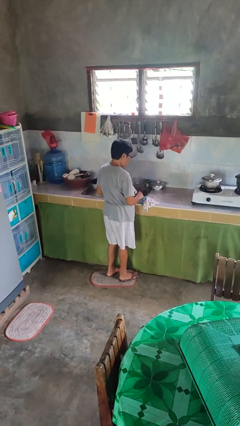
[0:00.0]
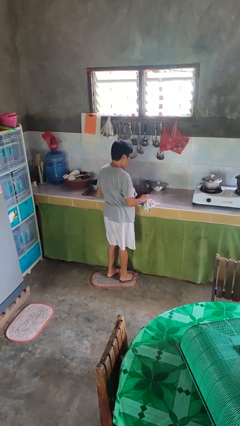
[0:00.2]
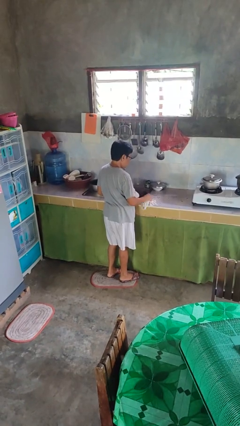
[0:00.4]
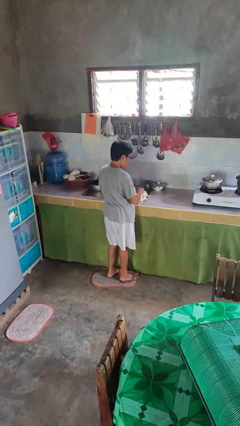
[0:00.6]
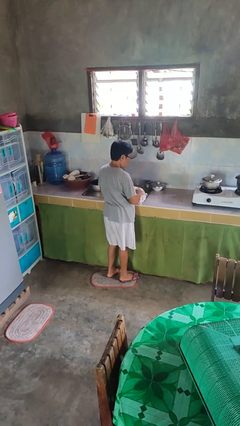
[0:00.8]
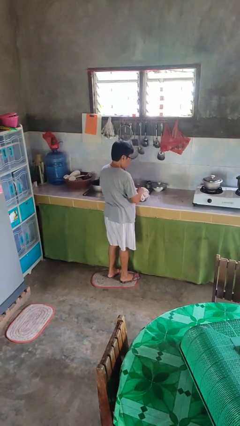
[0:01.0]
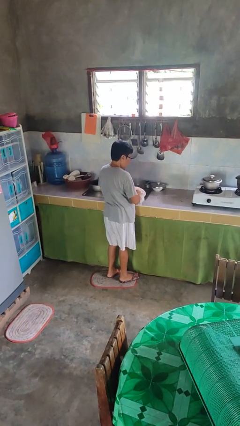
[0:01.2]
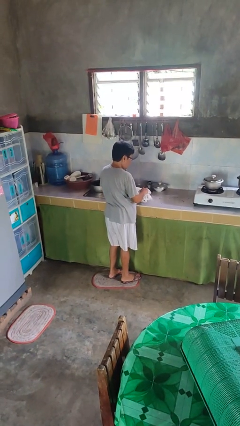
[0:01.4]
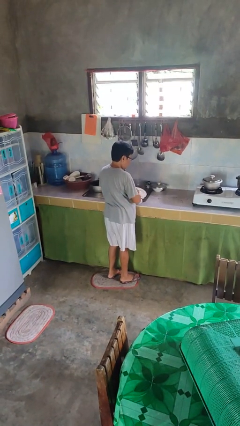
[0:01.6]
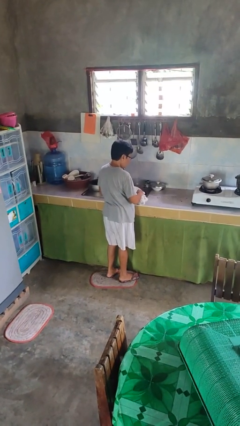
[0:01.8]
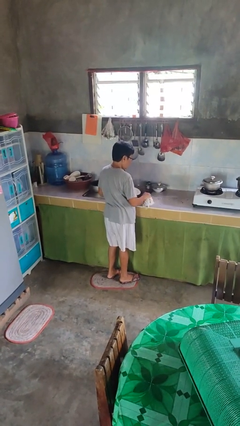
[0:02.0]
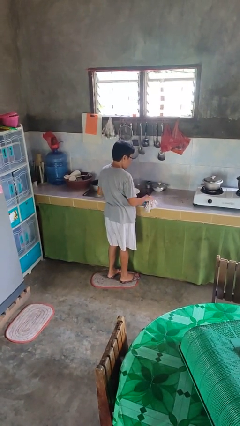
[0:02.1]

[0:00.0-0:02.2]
person dries dish

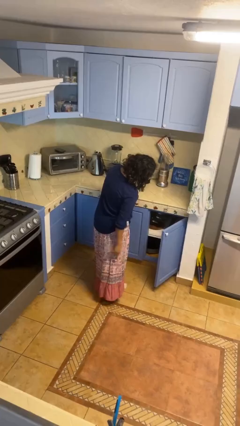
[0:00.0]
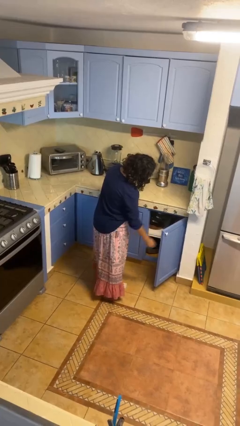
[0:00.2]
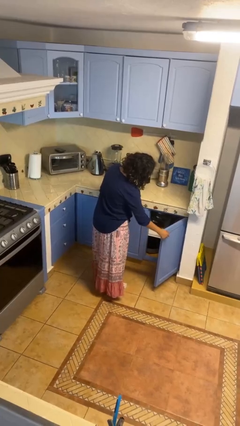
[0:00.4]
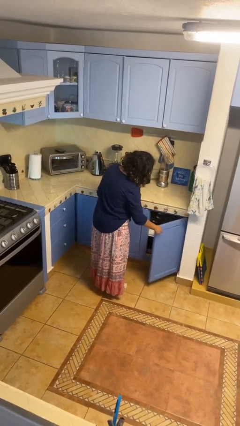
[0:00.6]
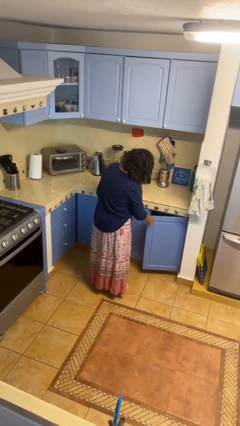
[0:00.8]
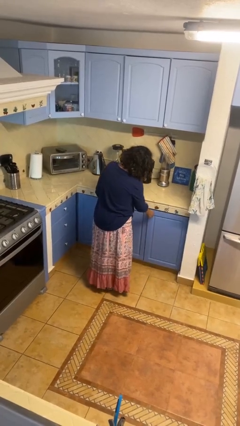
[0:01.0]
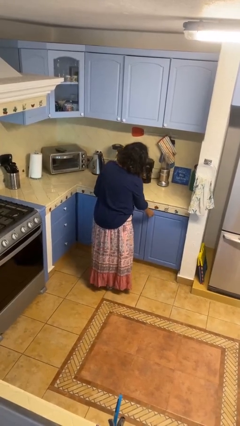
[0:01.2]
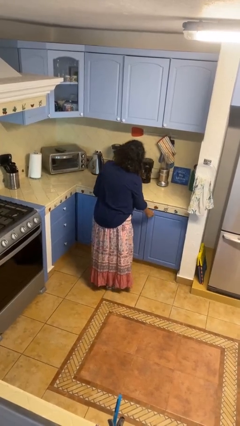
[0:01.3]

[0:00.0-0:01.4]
person closes cabinet

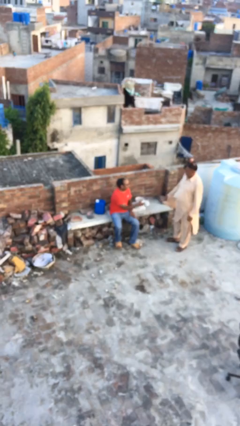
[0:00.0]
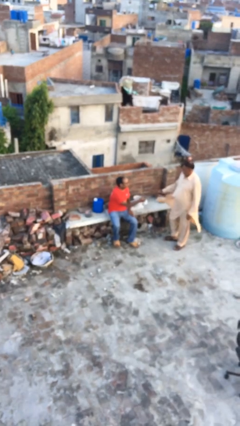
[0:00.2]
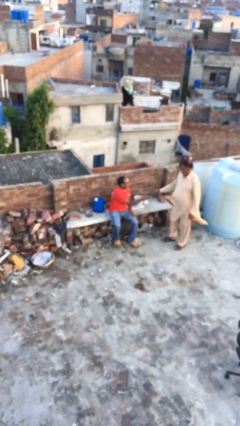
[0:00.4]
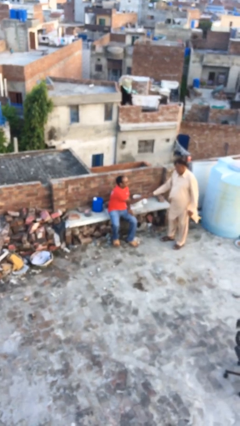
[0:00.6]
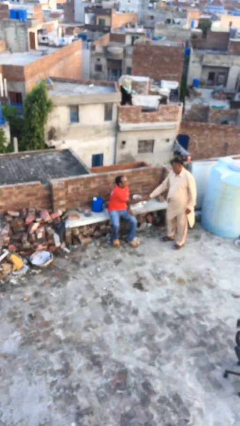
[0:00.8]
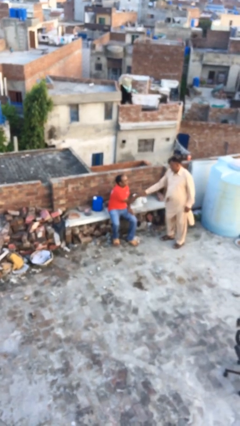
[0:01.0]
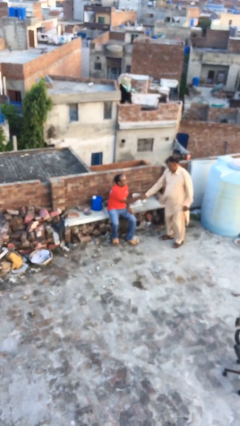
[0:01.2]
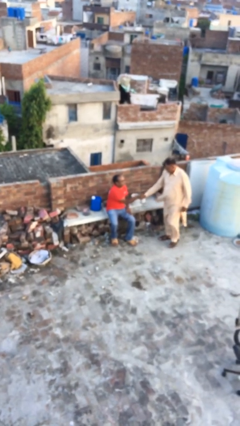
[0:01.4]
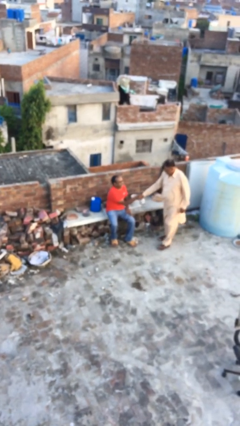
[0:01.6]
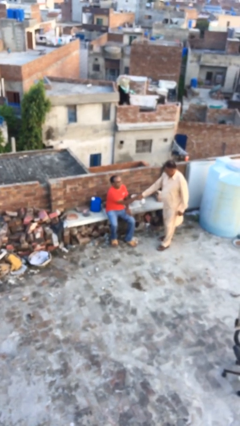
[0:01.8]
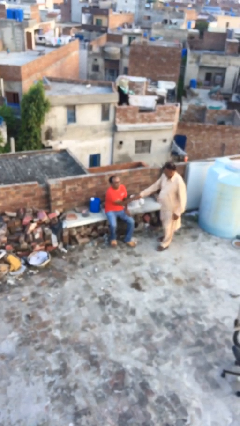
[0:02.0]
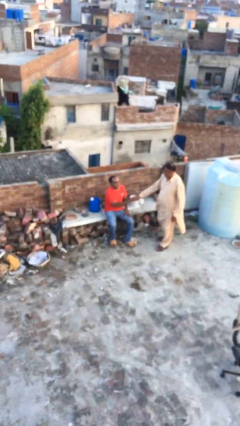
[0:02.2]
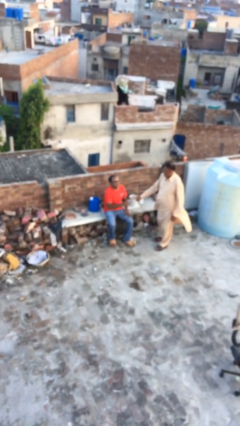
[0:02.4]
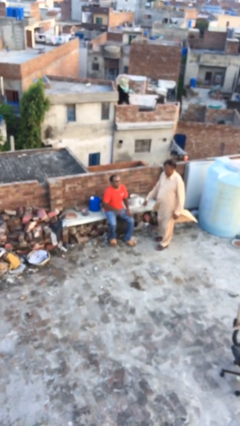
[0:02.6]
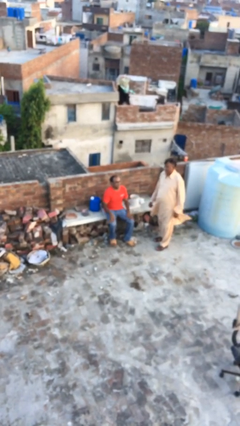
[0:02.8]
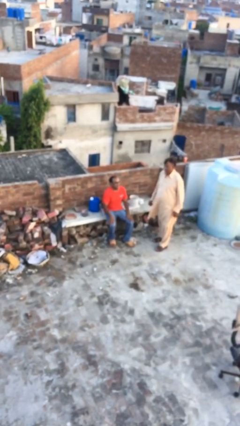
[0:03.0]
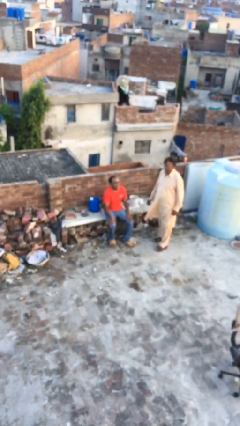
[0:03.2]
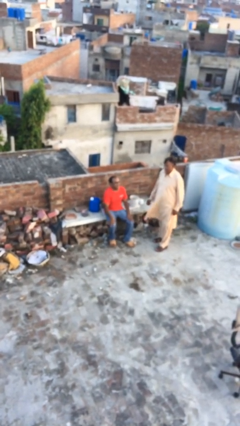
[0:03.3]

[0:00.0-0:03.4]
person shakes hand

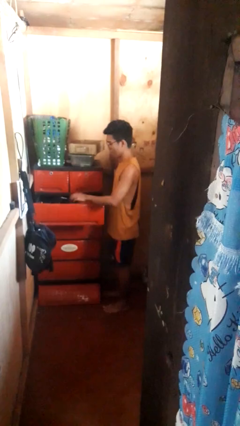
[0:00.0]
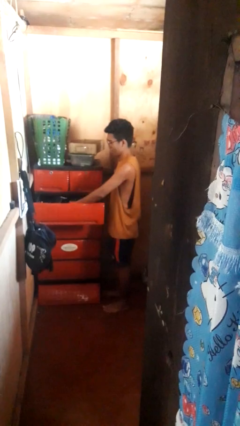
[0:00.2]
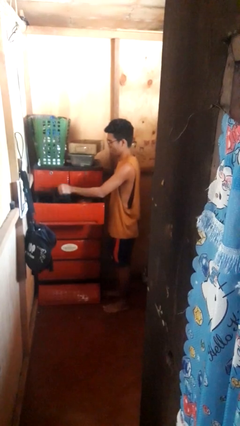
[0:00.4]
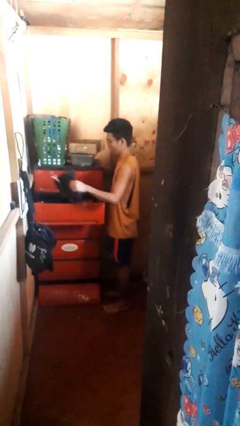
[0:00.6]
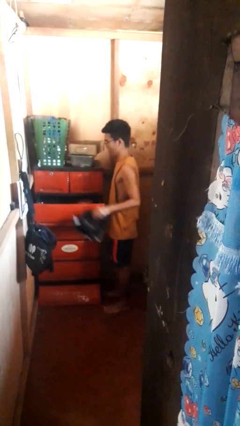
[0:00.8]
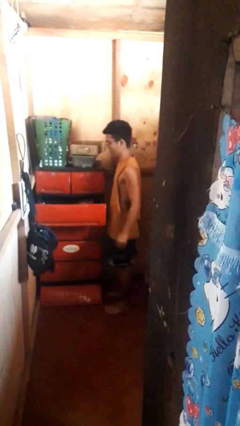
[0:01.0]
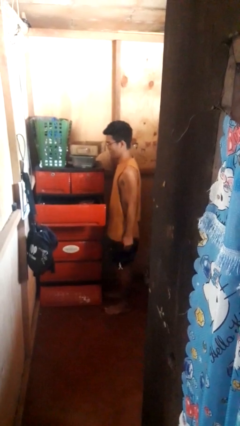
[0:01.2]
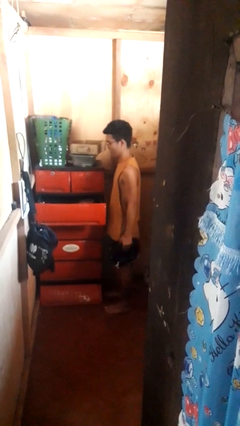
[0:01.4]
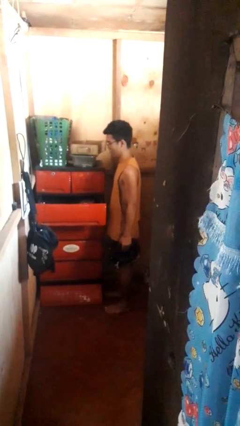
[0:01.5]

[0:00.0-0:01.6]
person takes clothes from dresser

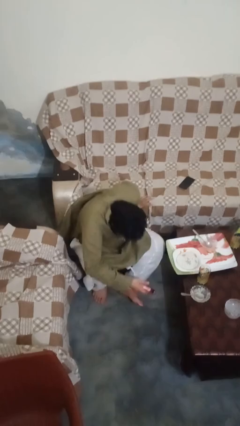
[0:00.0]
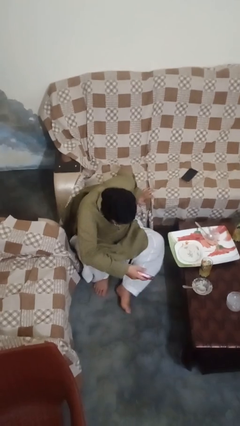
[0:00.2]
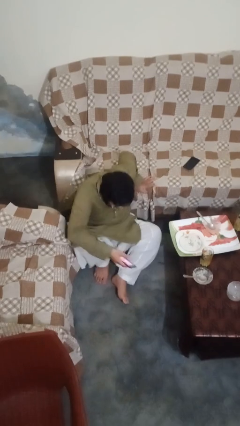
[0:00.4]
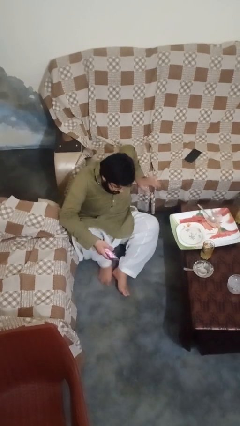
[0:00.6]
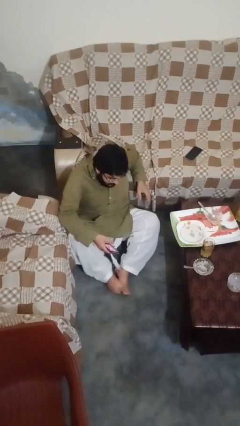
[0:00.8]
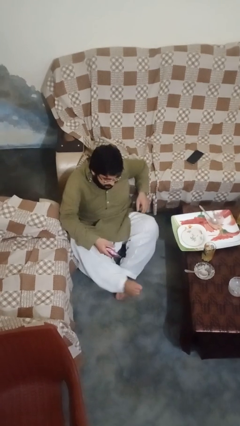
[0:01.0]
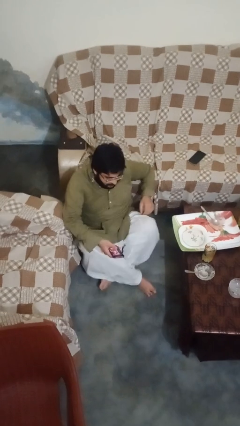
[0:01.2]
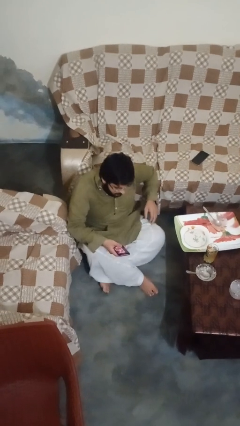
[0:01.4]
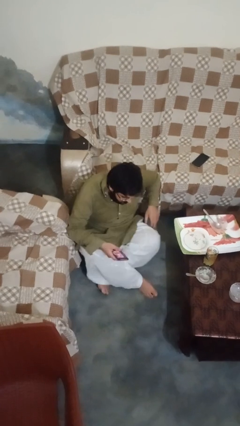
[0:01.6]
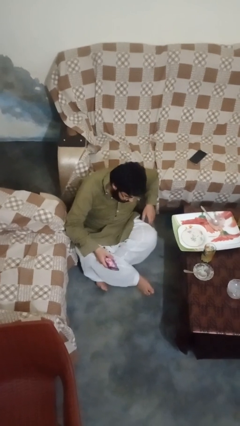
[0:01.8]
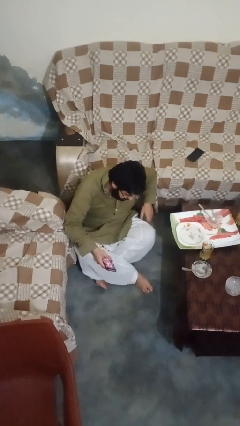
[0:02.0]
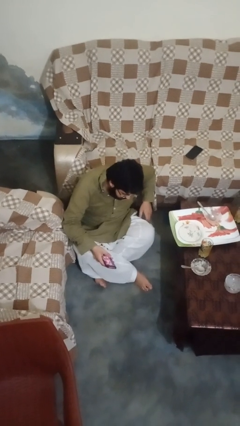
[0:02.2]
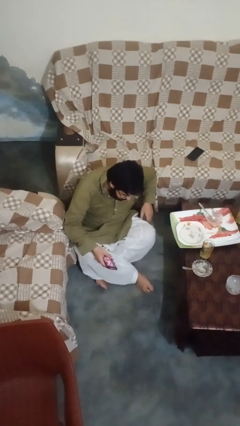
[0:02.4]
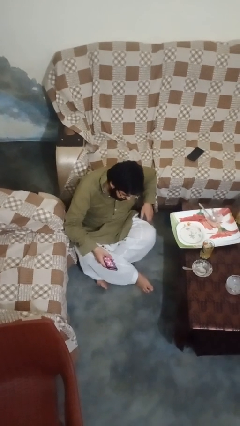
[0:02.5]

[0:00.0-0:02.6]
person sits crisscross

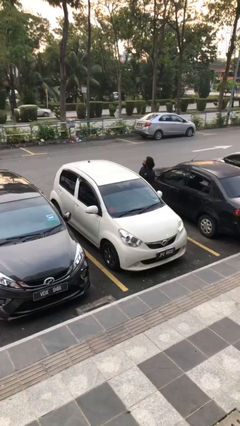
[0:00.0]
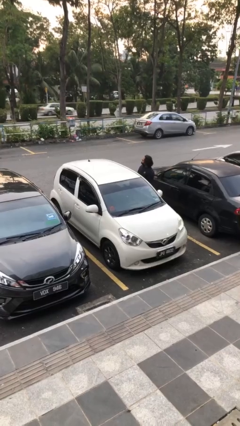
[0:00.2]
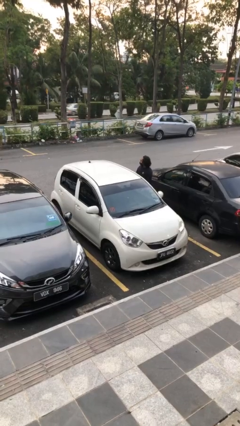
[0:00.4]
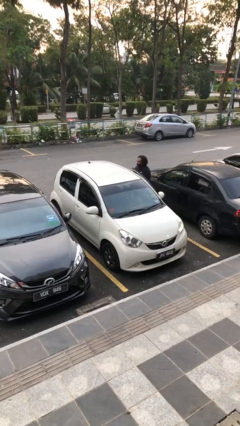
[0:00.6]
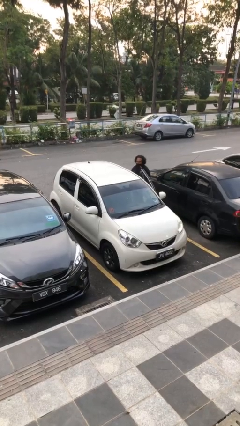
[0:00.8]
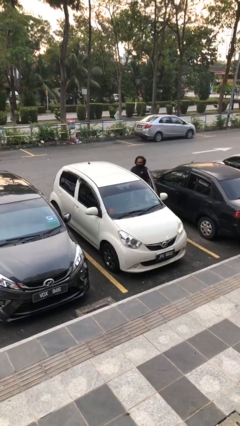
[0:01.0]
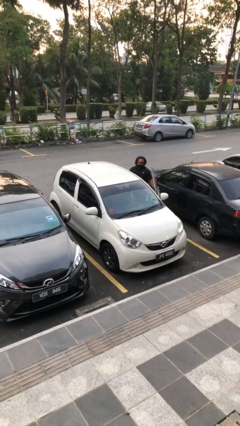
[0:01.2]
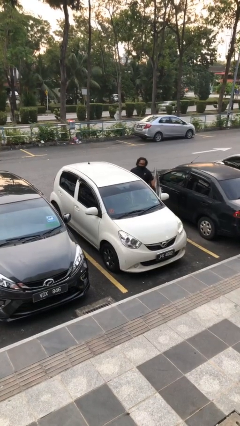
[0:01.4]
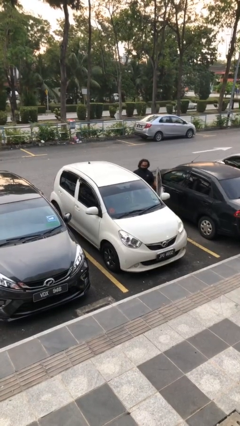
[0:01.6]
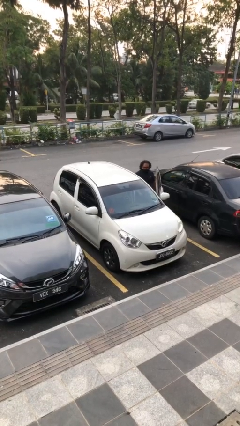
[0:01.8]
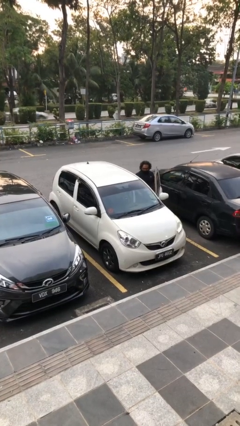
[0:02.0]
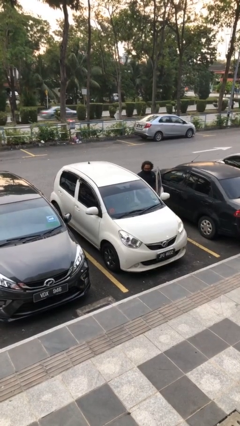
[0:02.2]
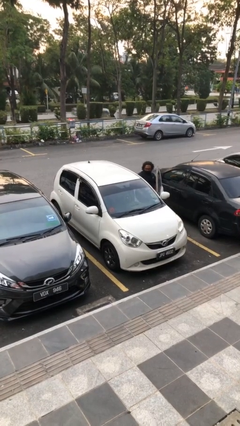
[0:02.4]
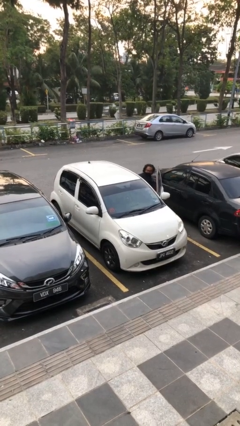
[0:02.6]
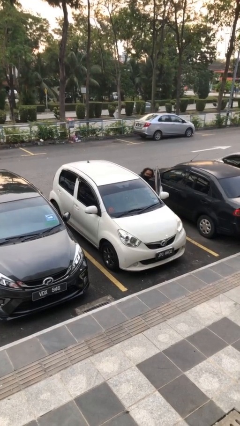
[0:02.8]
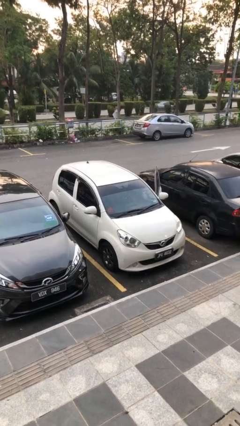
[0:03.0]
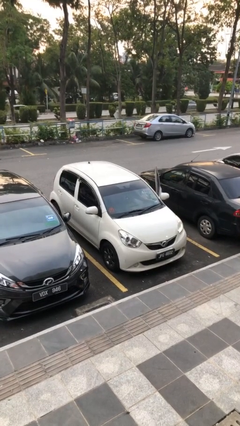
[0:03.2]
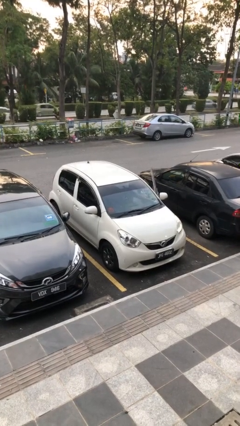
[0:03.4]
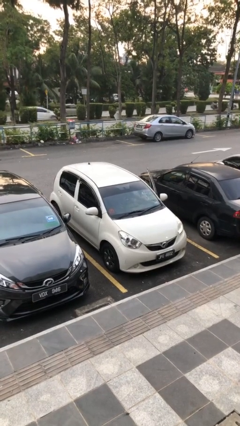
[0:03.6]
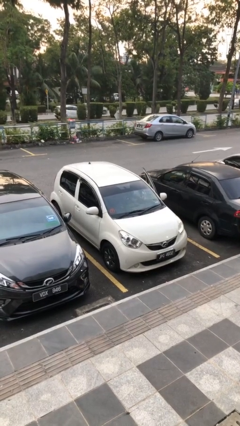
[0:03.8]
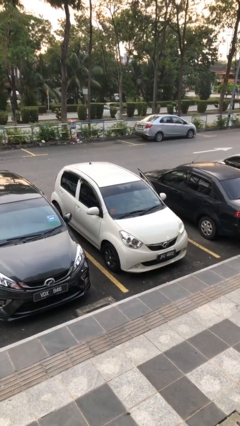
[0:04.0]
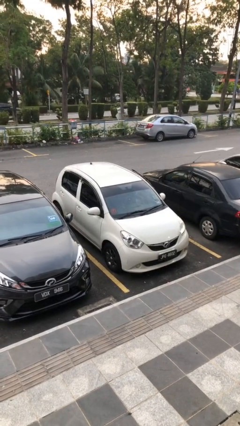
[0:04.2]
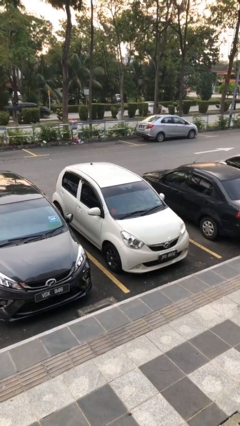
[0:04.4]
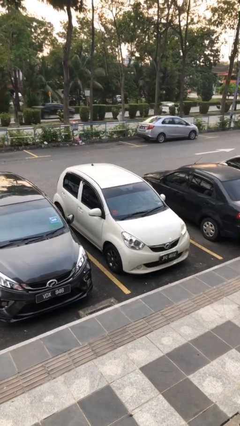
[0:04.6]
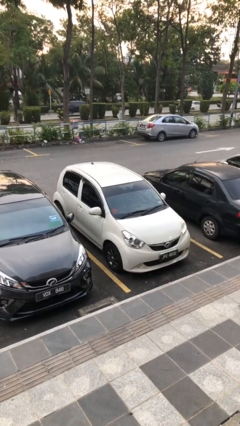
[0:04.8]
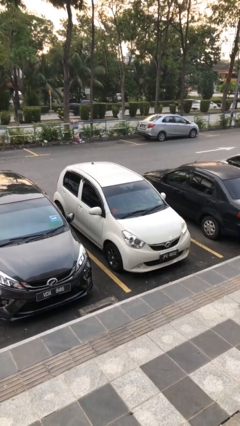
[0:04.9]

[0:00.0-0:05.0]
car picks up person

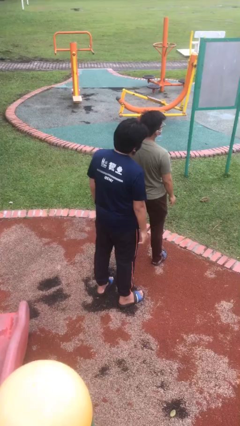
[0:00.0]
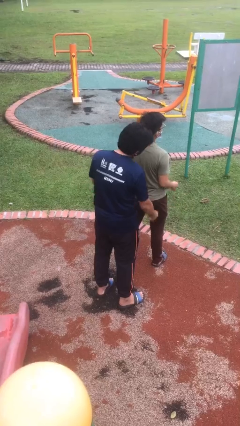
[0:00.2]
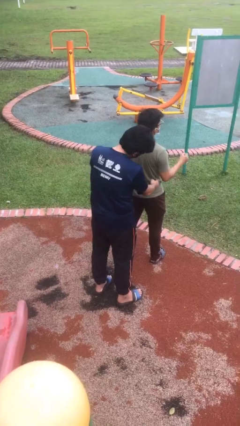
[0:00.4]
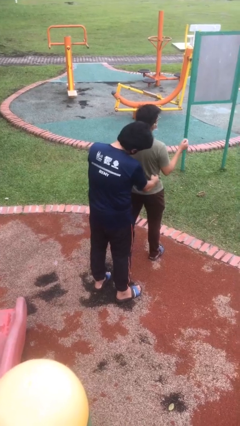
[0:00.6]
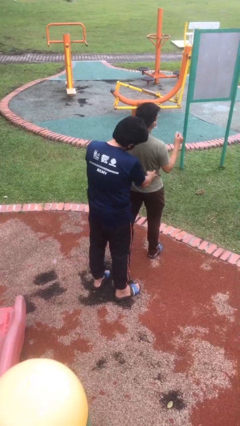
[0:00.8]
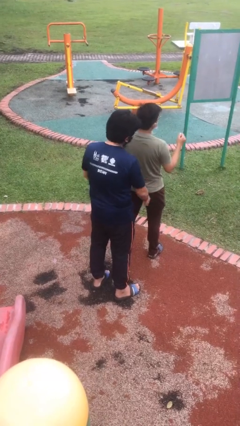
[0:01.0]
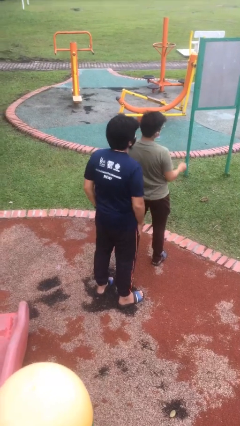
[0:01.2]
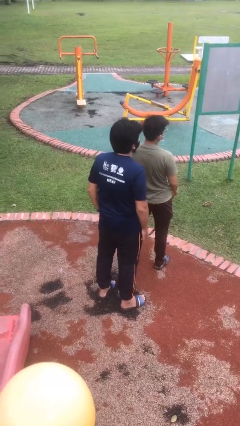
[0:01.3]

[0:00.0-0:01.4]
person tickles person
